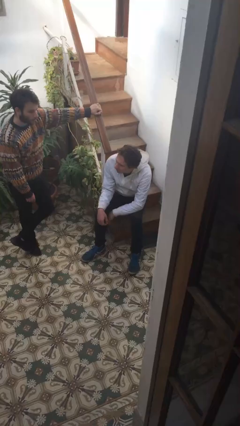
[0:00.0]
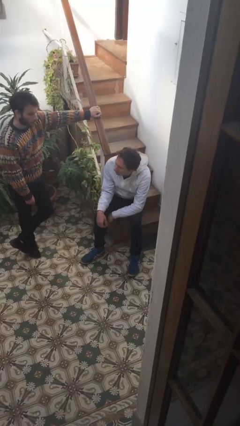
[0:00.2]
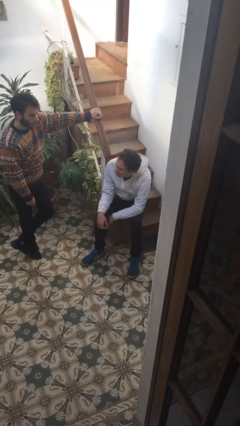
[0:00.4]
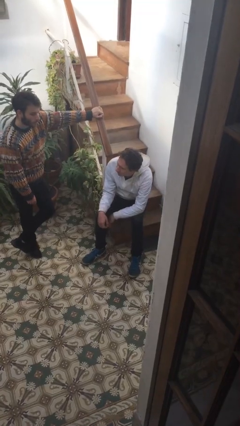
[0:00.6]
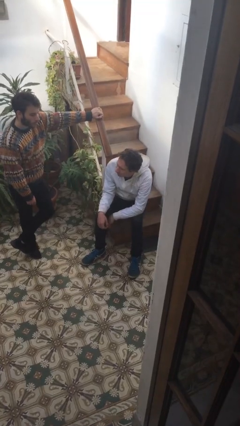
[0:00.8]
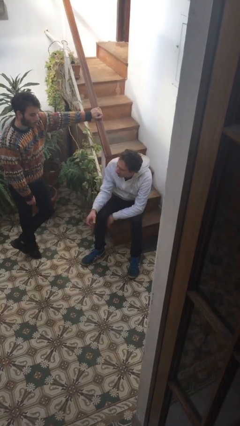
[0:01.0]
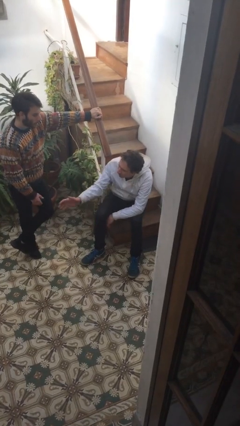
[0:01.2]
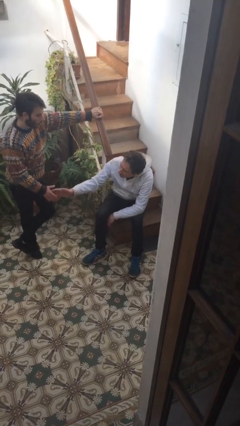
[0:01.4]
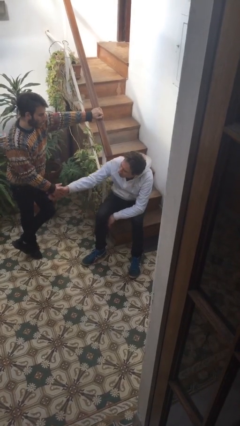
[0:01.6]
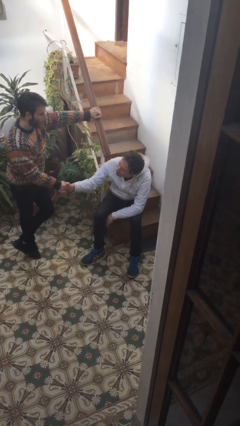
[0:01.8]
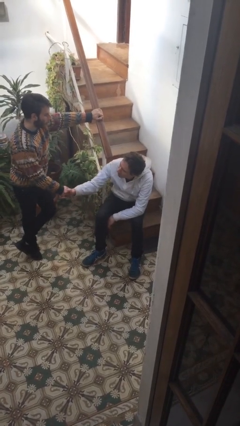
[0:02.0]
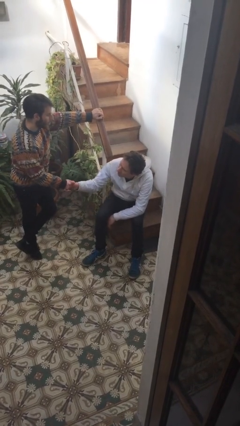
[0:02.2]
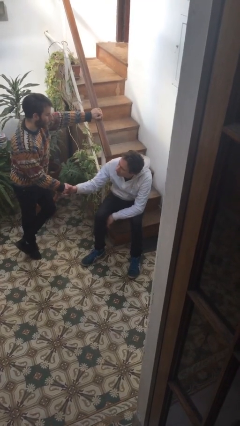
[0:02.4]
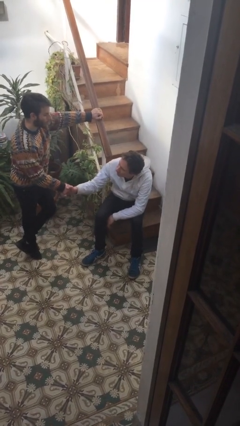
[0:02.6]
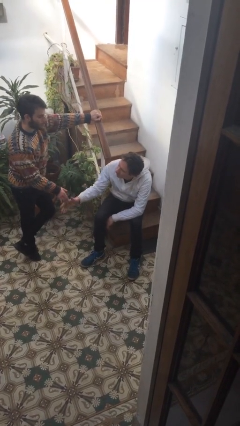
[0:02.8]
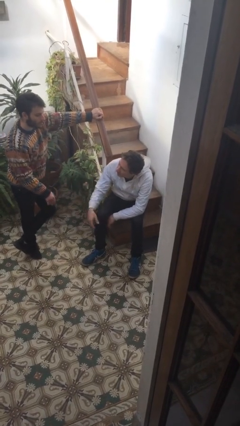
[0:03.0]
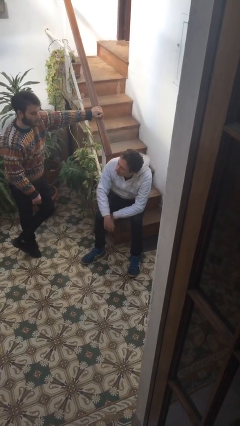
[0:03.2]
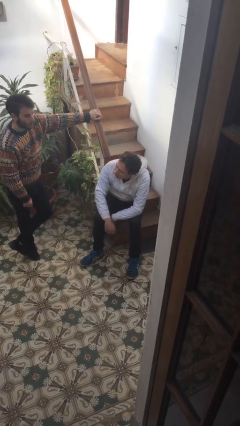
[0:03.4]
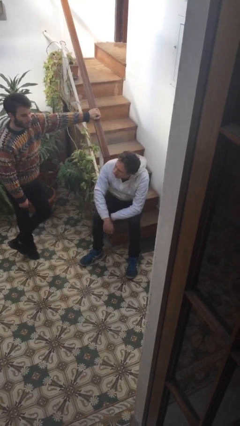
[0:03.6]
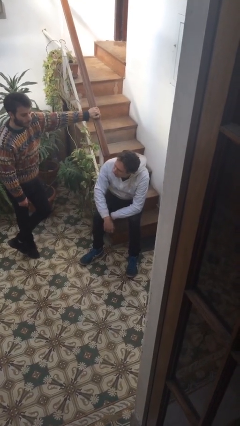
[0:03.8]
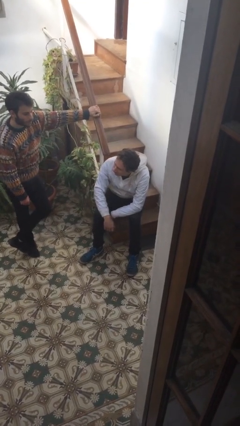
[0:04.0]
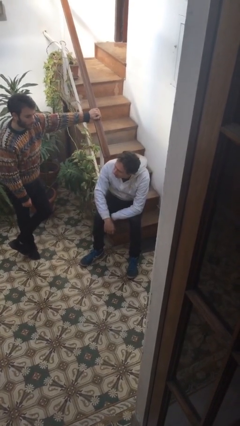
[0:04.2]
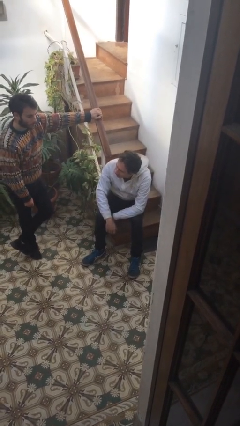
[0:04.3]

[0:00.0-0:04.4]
person shakes hand

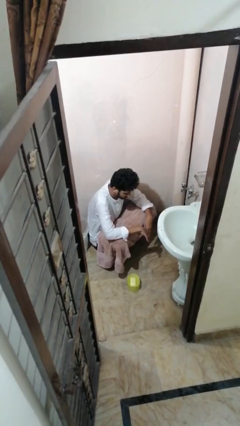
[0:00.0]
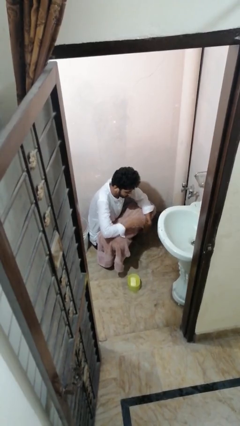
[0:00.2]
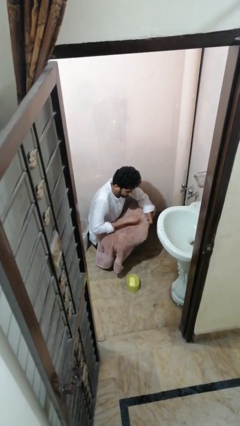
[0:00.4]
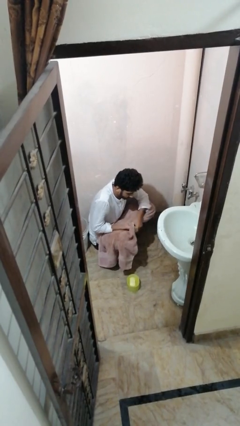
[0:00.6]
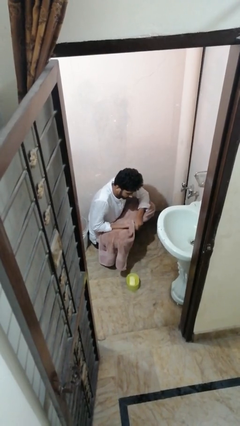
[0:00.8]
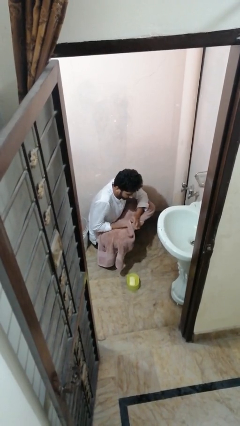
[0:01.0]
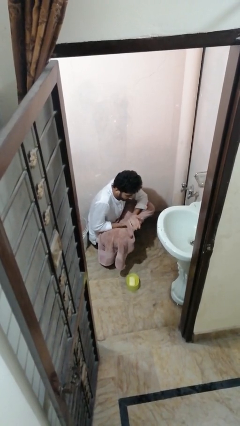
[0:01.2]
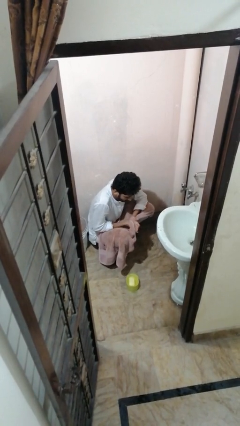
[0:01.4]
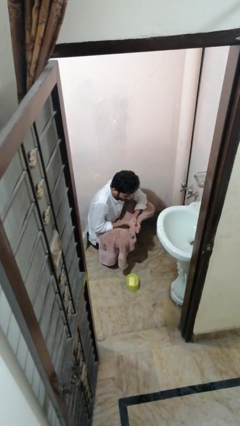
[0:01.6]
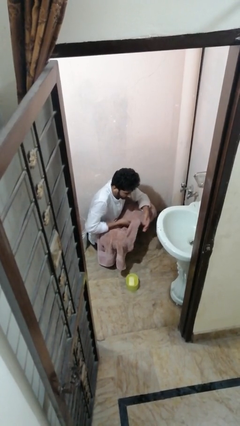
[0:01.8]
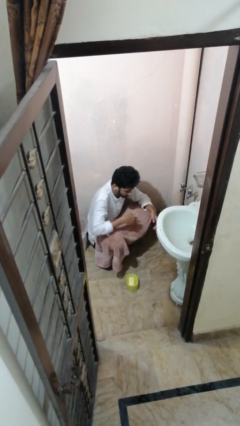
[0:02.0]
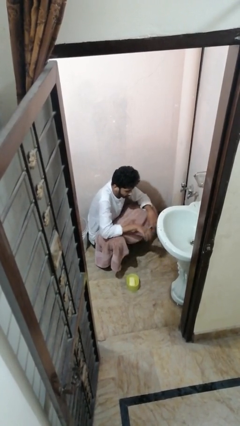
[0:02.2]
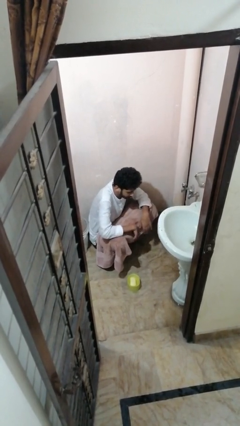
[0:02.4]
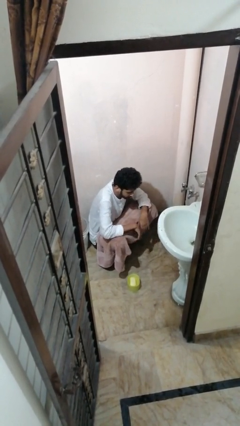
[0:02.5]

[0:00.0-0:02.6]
person dries hands with towel

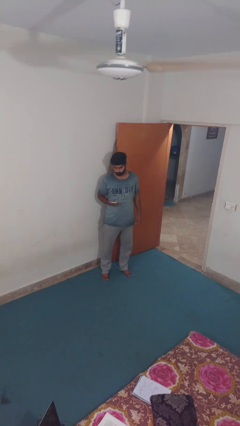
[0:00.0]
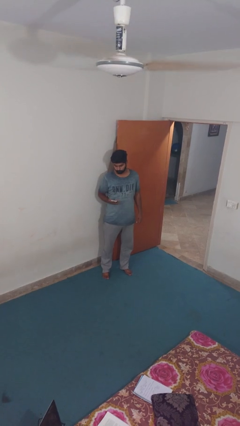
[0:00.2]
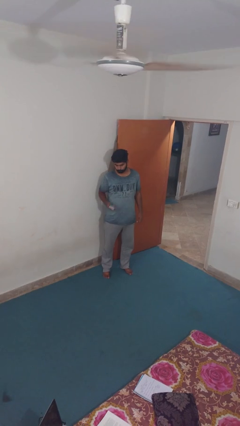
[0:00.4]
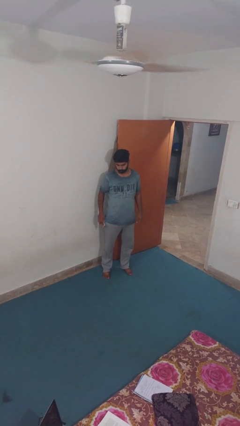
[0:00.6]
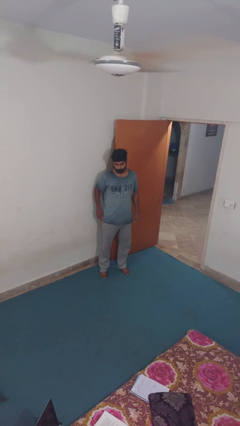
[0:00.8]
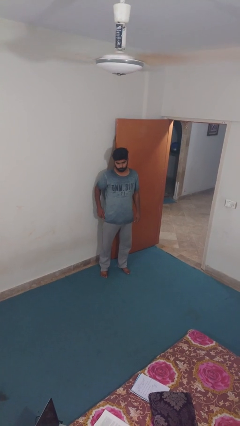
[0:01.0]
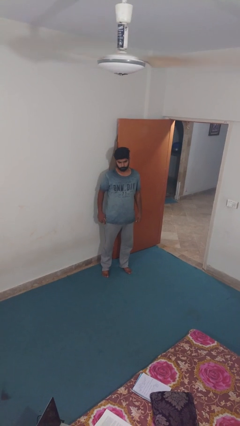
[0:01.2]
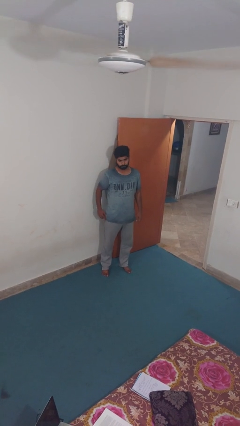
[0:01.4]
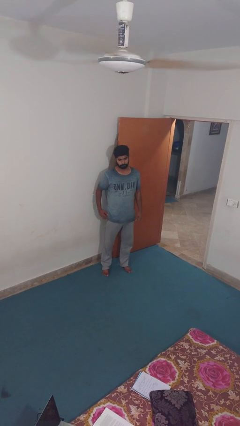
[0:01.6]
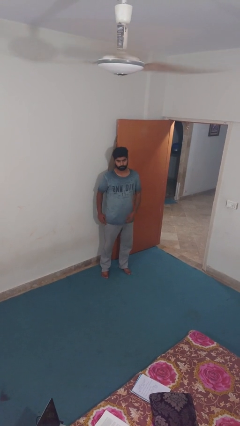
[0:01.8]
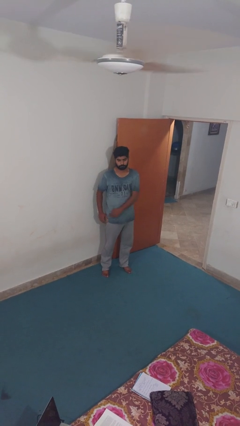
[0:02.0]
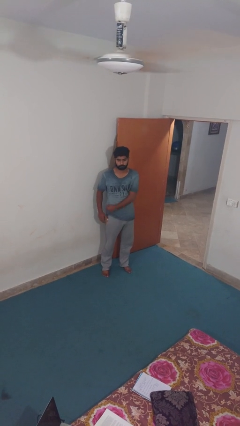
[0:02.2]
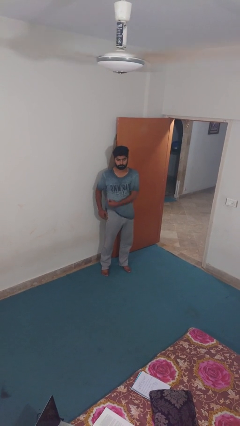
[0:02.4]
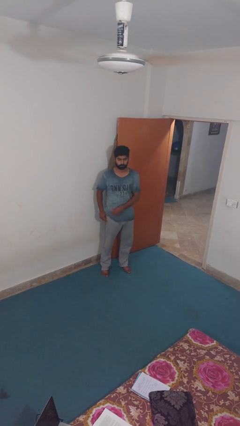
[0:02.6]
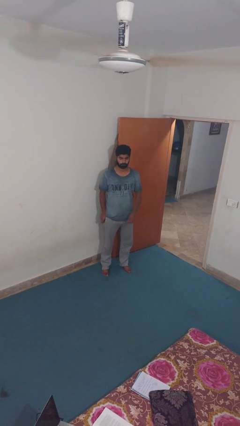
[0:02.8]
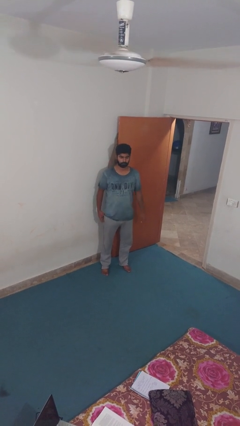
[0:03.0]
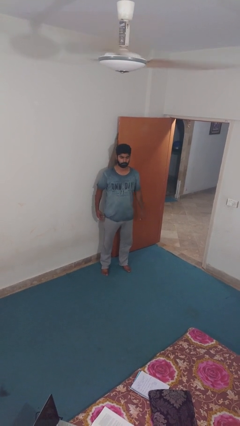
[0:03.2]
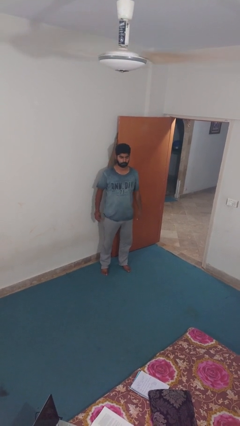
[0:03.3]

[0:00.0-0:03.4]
person puts phone into pocket

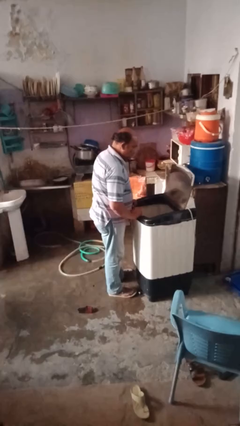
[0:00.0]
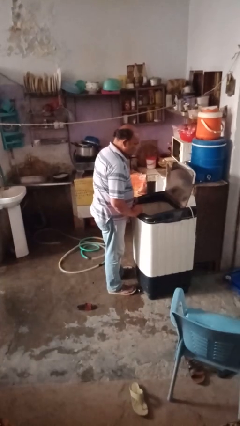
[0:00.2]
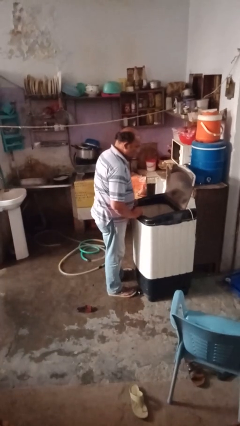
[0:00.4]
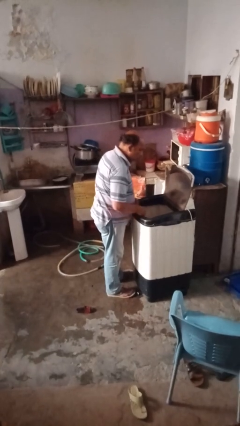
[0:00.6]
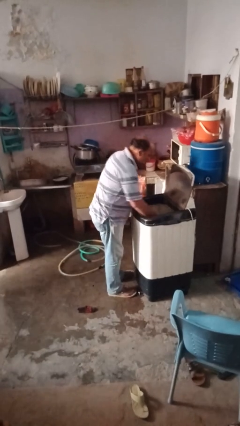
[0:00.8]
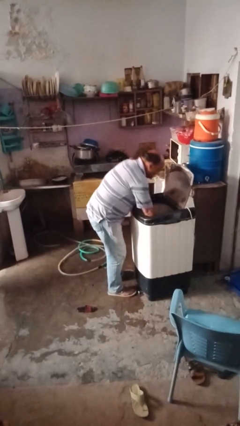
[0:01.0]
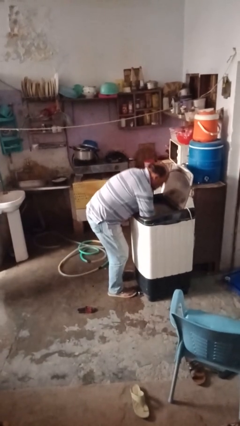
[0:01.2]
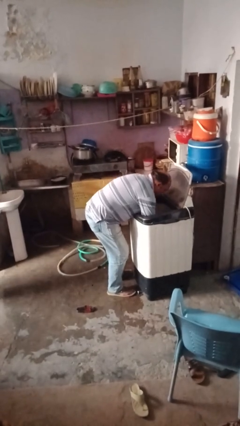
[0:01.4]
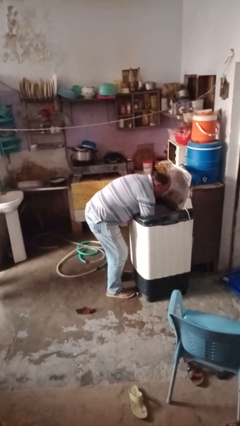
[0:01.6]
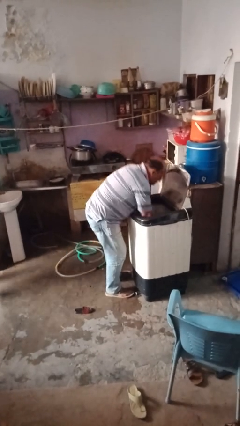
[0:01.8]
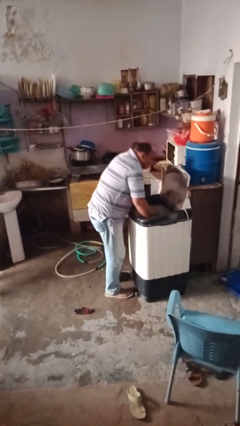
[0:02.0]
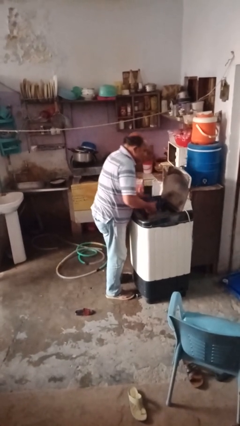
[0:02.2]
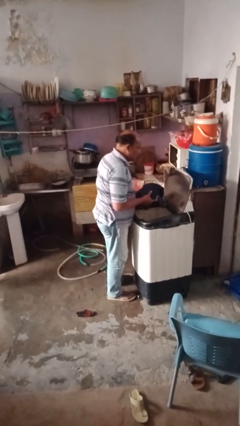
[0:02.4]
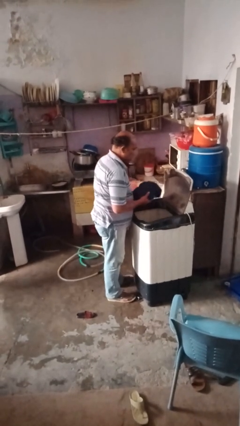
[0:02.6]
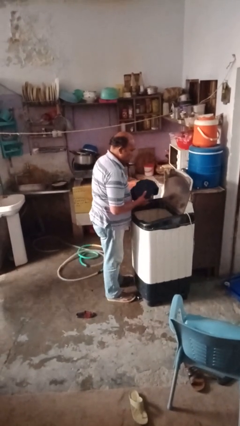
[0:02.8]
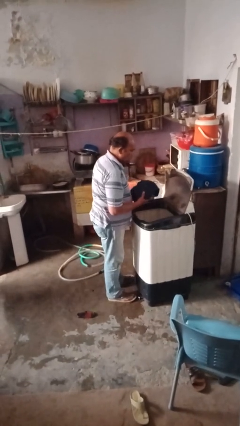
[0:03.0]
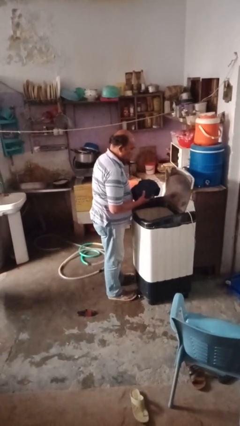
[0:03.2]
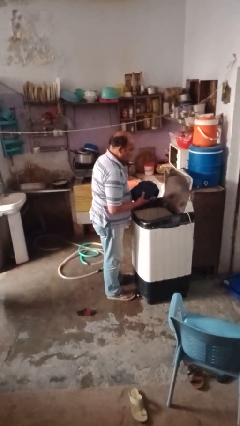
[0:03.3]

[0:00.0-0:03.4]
person unloads clotheswasher

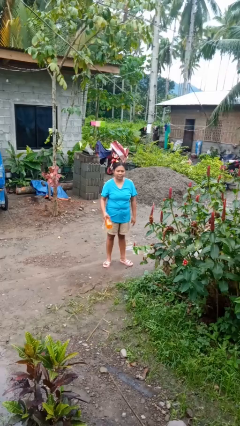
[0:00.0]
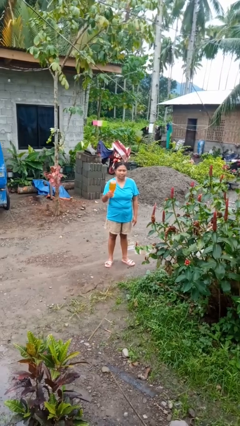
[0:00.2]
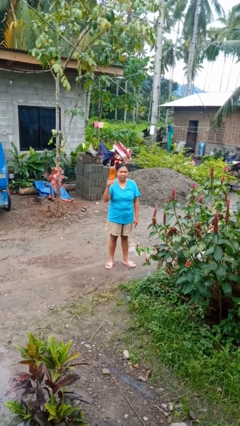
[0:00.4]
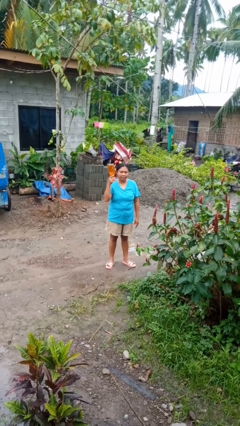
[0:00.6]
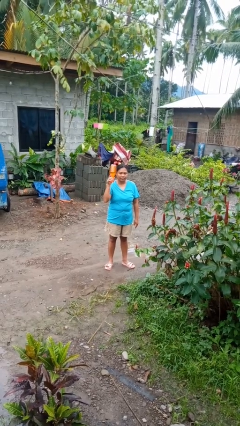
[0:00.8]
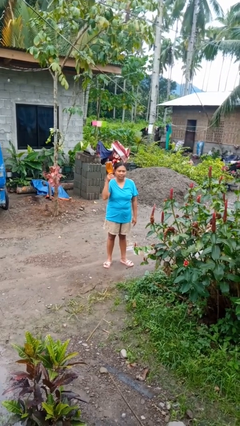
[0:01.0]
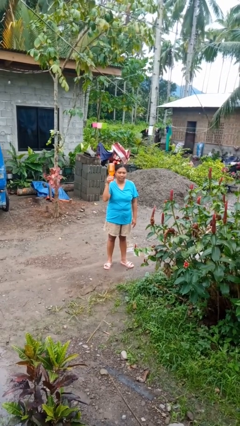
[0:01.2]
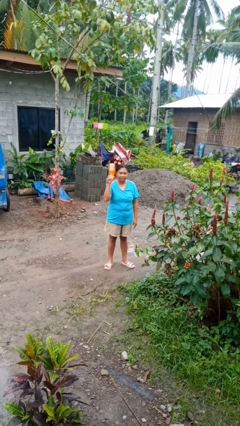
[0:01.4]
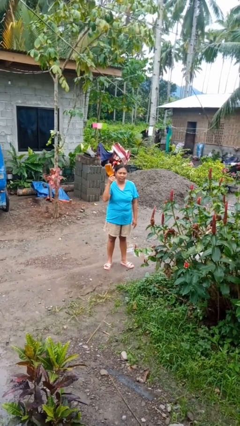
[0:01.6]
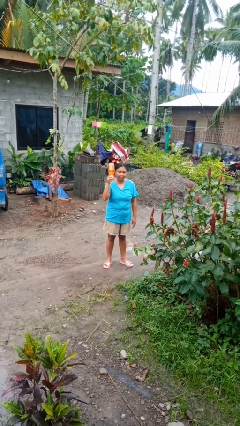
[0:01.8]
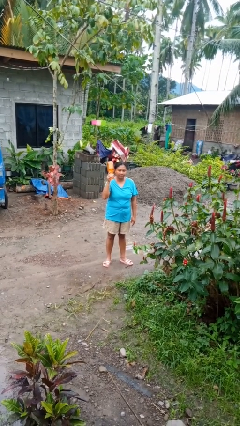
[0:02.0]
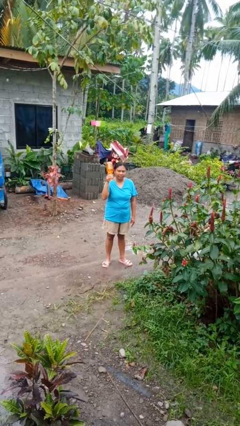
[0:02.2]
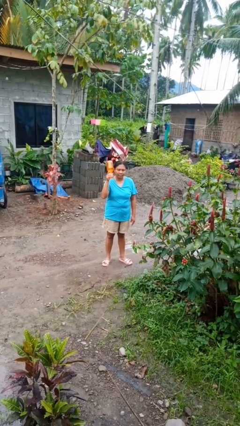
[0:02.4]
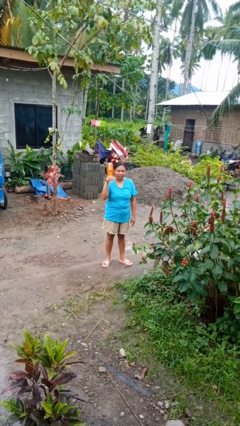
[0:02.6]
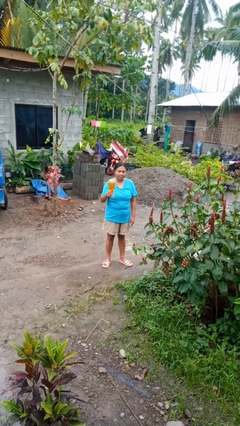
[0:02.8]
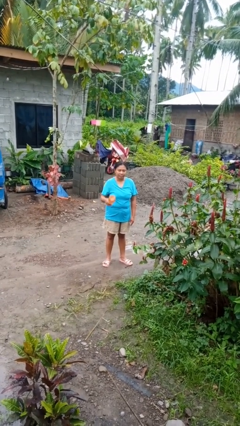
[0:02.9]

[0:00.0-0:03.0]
person holds object above head

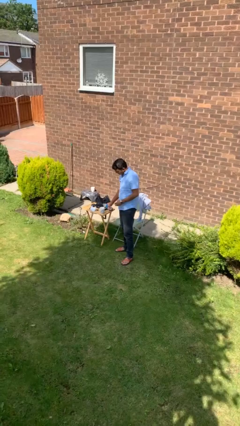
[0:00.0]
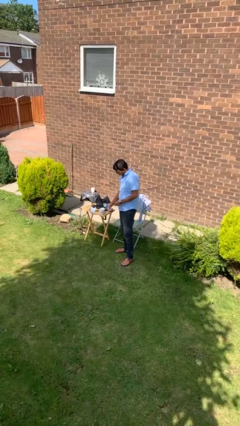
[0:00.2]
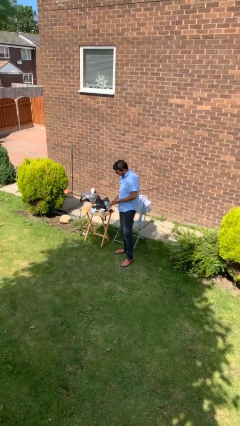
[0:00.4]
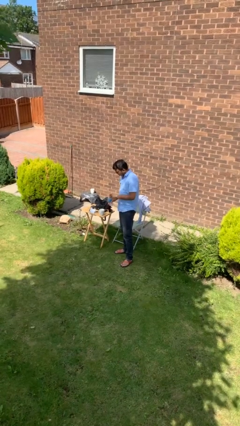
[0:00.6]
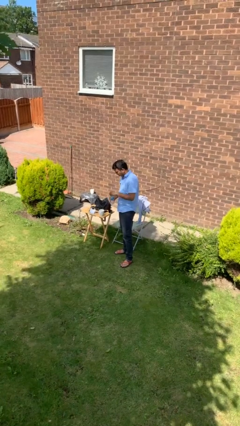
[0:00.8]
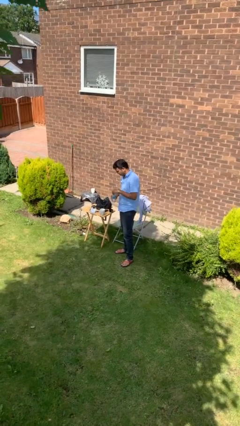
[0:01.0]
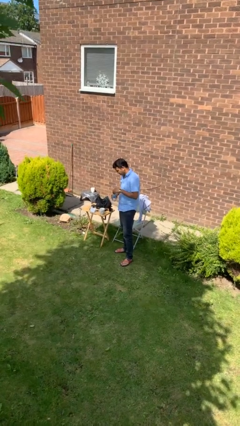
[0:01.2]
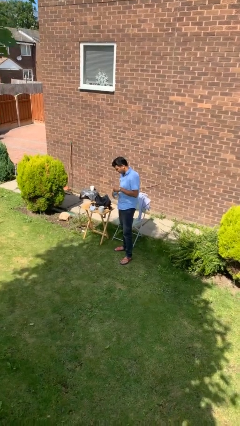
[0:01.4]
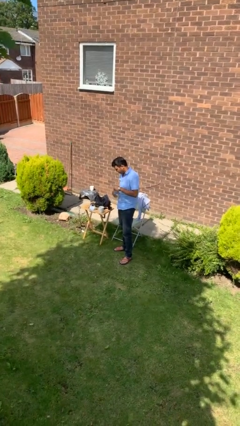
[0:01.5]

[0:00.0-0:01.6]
person screws lid to bottle
